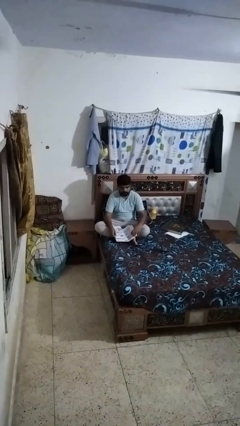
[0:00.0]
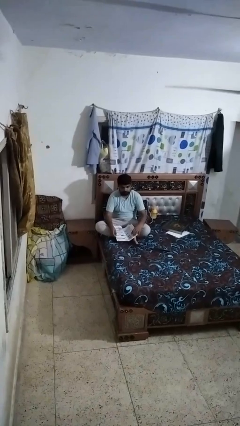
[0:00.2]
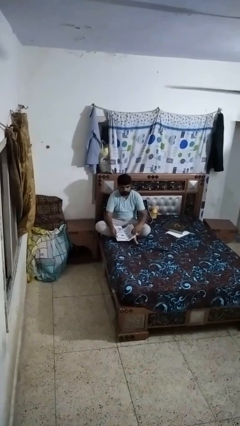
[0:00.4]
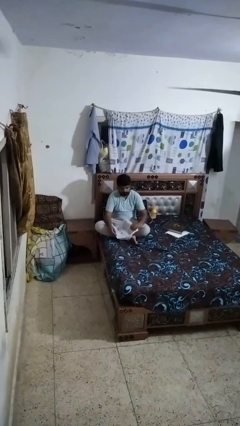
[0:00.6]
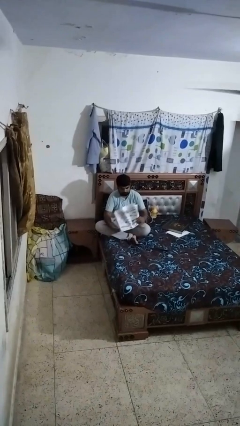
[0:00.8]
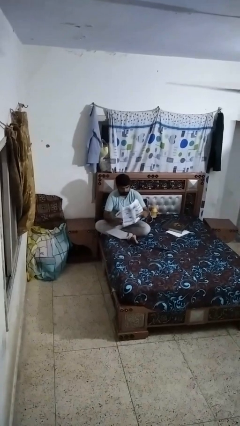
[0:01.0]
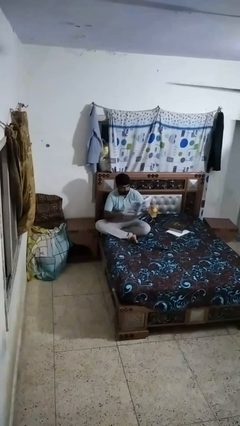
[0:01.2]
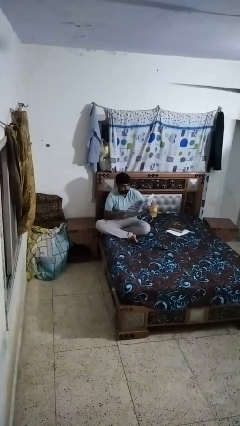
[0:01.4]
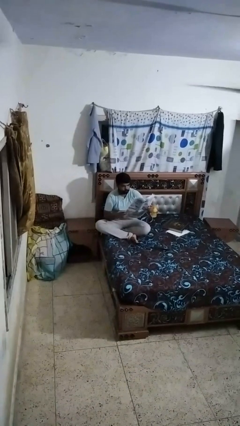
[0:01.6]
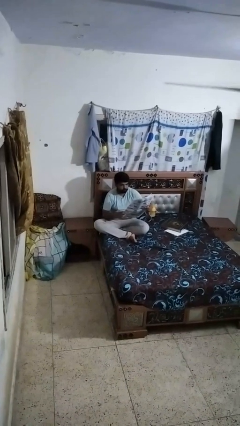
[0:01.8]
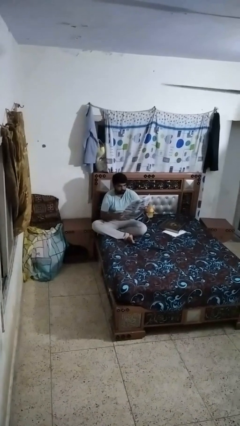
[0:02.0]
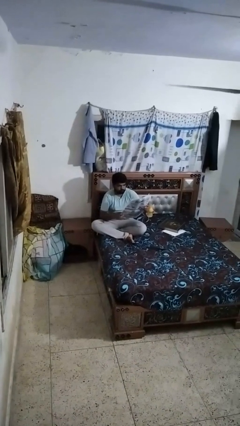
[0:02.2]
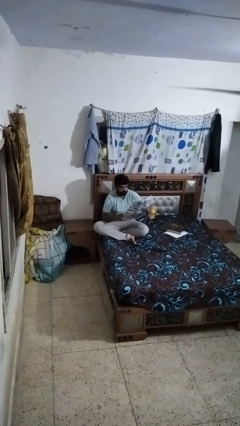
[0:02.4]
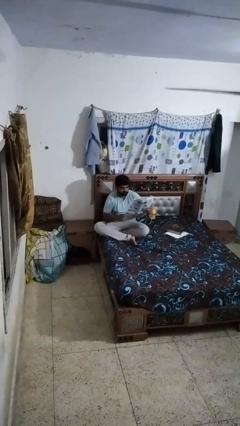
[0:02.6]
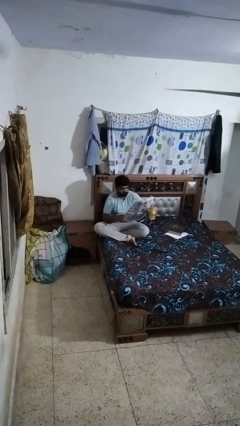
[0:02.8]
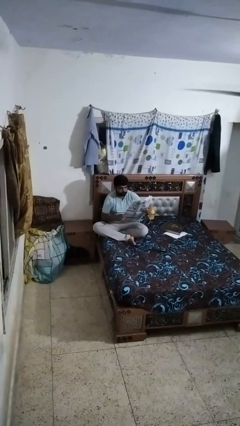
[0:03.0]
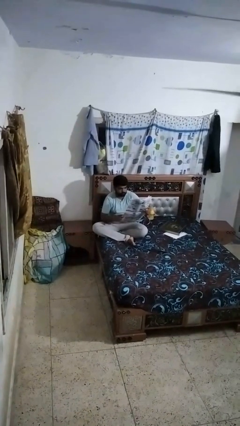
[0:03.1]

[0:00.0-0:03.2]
person reads newspaper

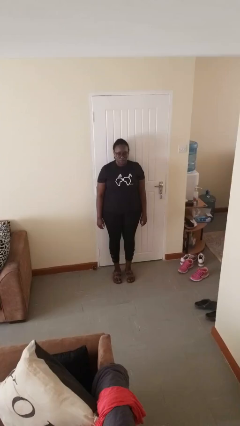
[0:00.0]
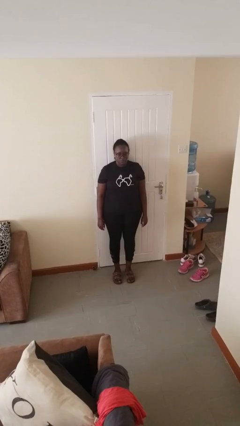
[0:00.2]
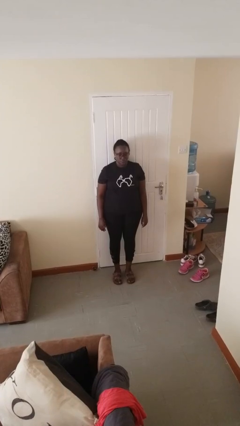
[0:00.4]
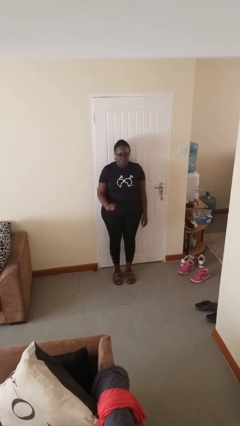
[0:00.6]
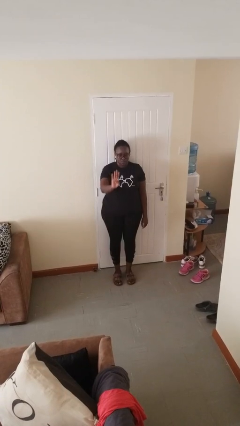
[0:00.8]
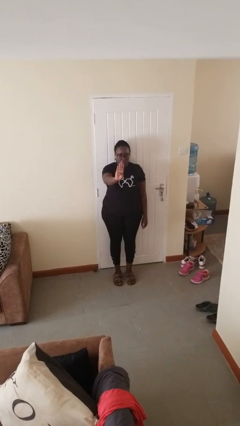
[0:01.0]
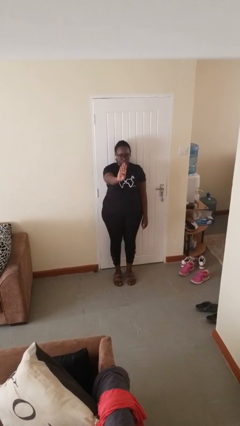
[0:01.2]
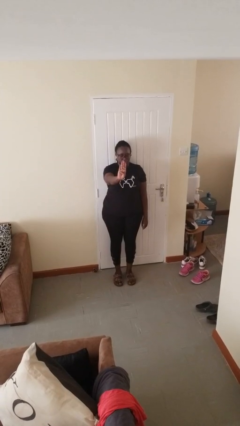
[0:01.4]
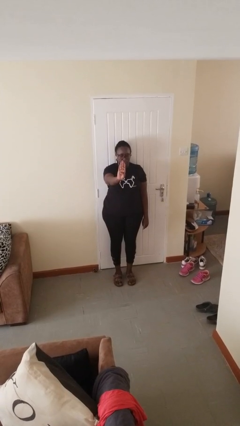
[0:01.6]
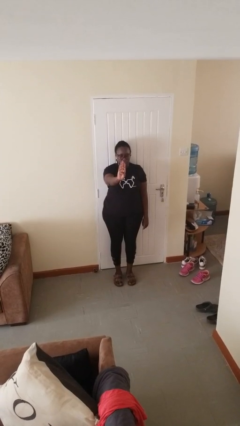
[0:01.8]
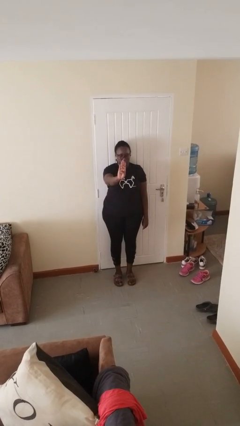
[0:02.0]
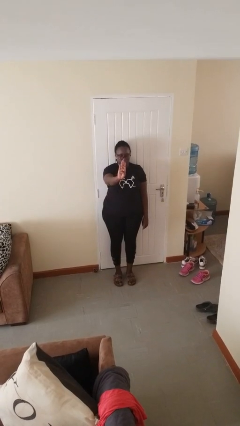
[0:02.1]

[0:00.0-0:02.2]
person gestures number four

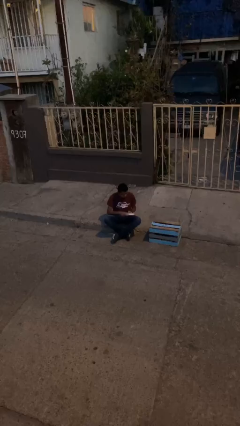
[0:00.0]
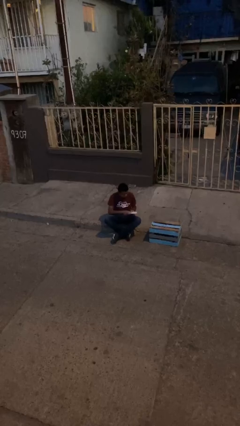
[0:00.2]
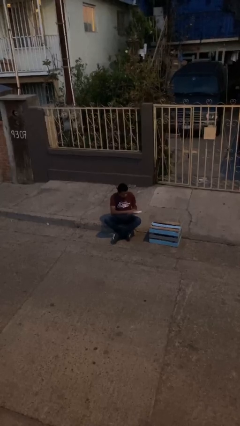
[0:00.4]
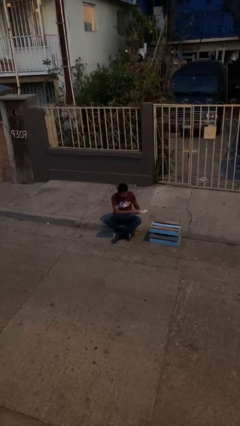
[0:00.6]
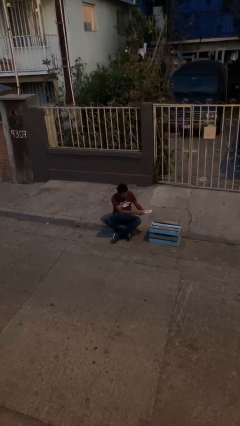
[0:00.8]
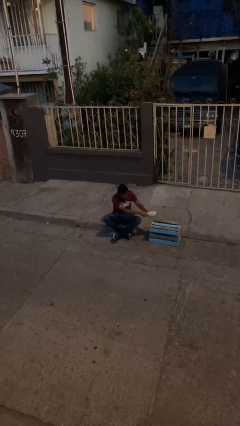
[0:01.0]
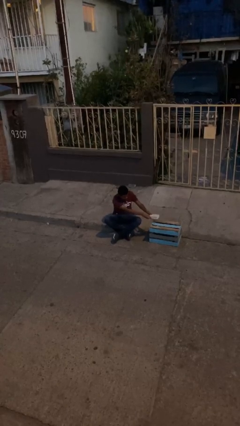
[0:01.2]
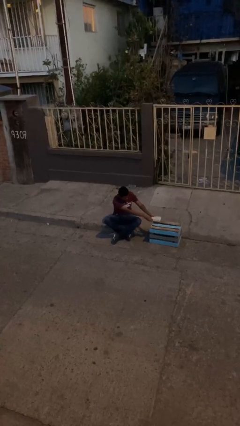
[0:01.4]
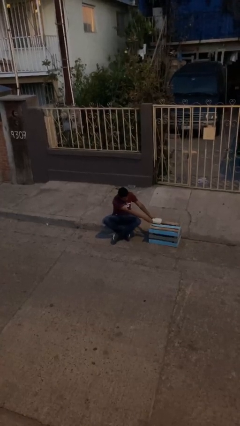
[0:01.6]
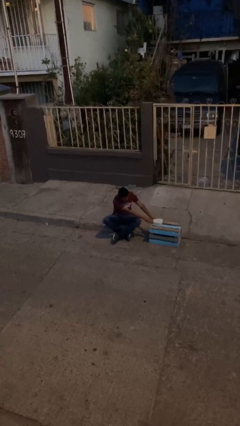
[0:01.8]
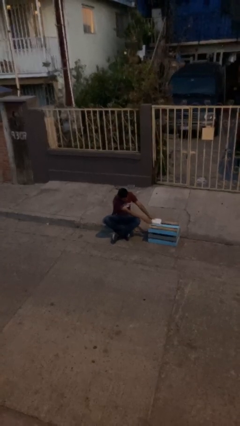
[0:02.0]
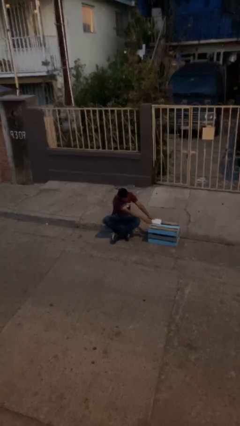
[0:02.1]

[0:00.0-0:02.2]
person puts down object on table

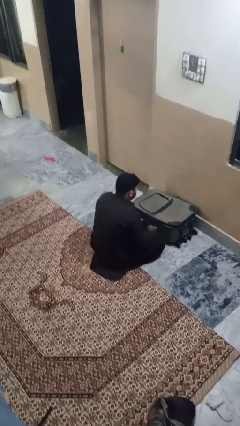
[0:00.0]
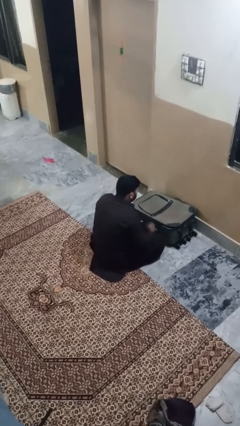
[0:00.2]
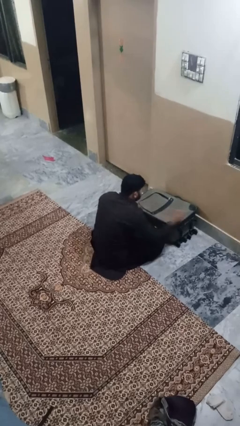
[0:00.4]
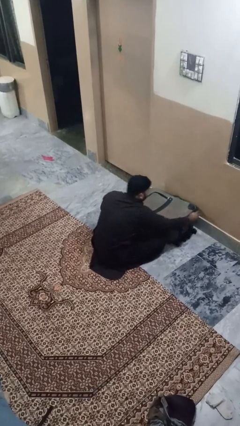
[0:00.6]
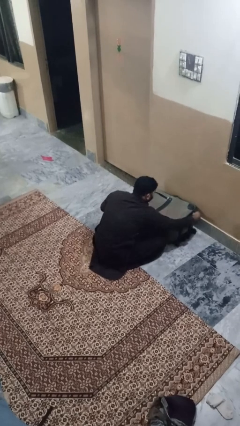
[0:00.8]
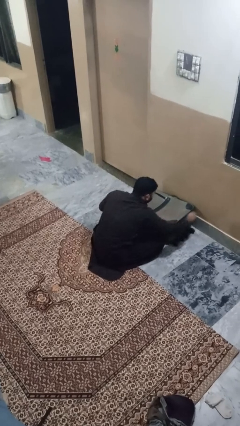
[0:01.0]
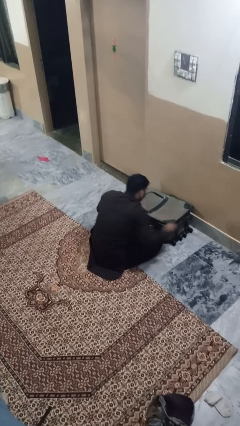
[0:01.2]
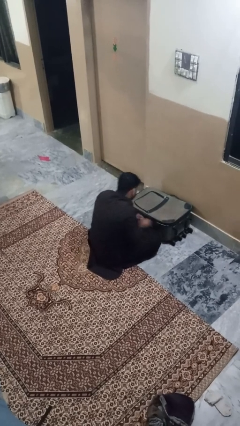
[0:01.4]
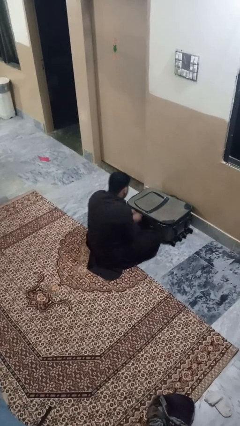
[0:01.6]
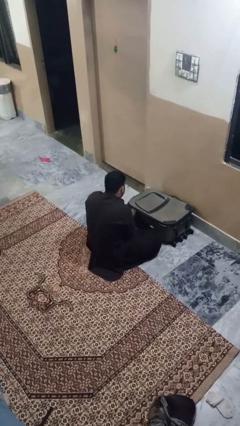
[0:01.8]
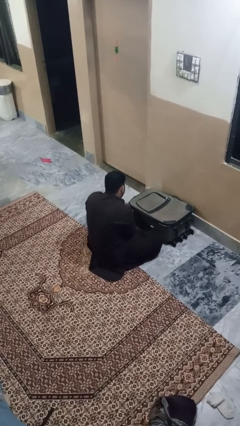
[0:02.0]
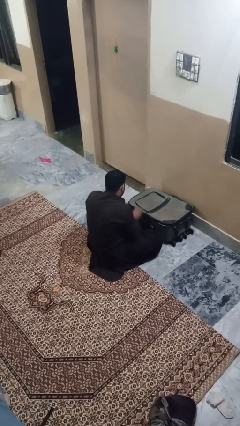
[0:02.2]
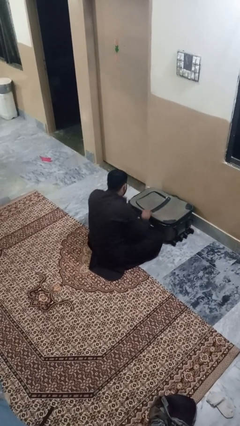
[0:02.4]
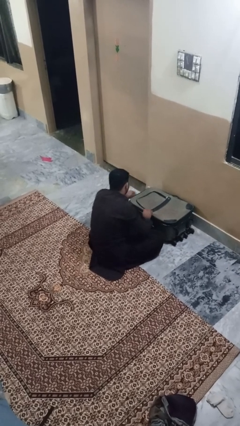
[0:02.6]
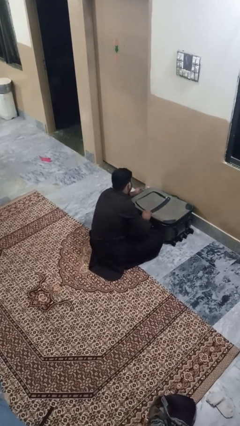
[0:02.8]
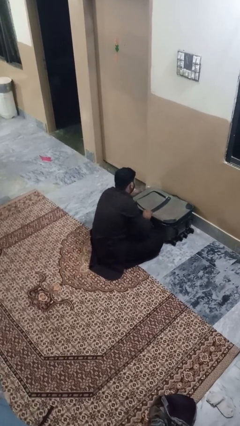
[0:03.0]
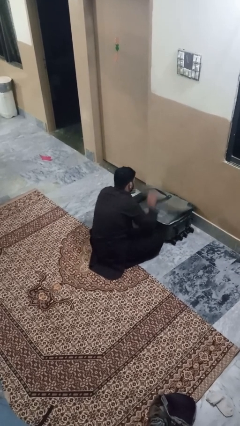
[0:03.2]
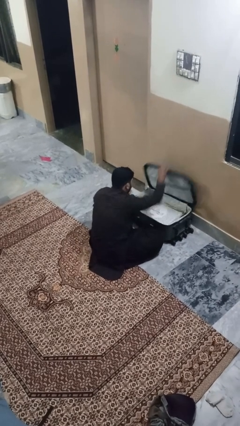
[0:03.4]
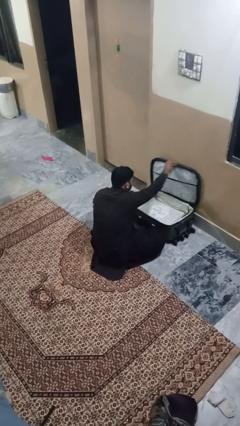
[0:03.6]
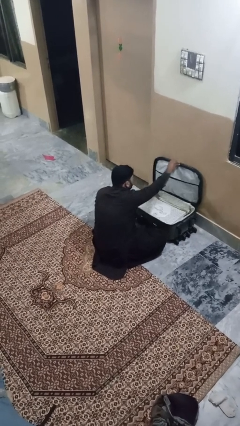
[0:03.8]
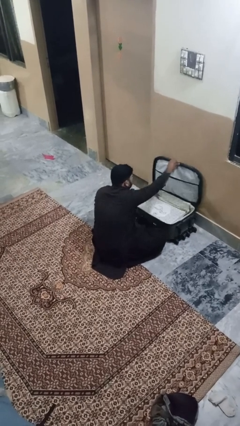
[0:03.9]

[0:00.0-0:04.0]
person opens suitcase

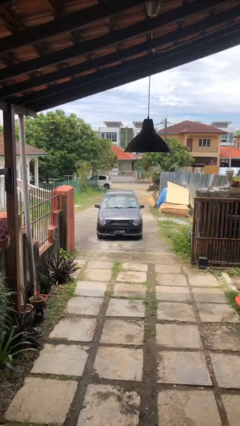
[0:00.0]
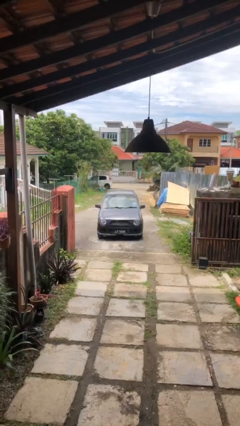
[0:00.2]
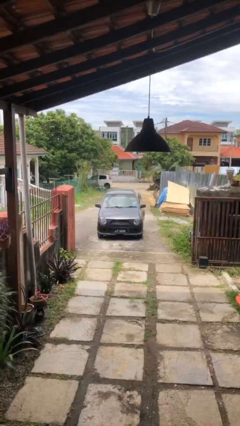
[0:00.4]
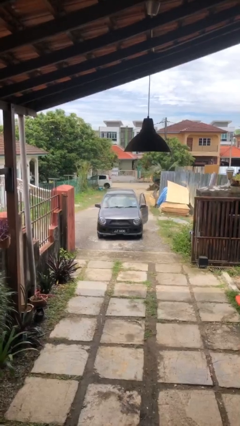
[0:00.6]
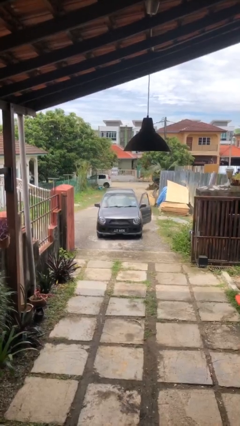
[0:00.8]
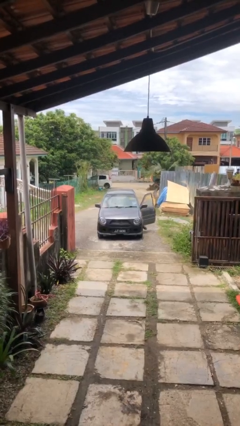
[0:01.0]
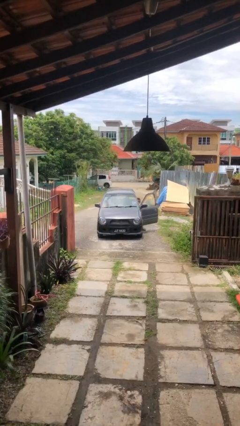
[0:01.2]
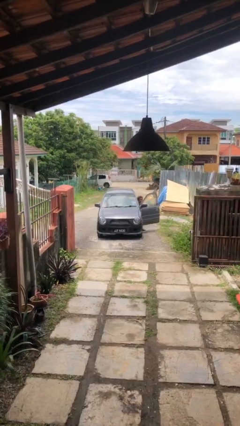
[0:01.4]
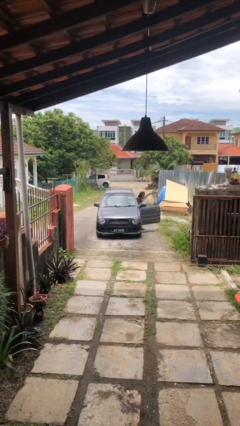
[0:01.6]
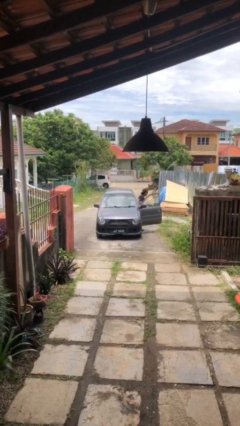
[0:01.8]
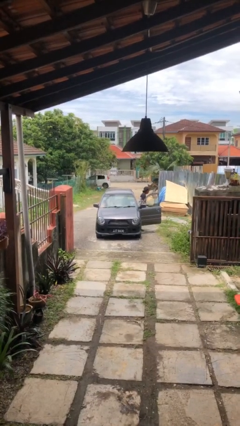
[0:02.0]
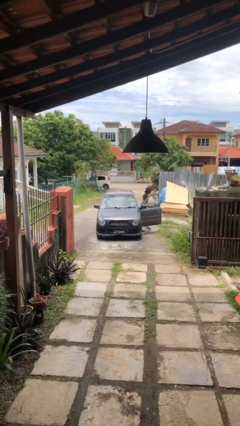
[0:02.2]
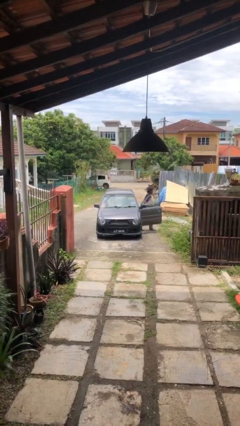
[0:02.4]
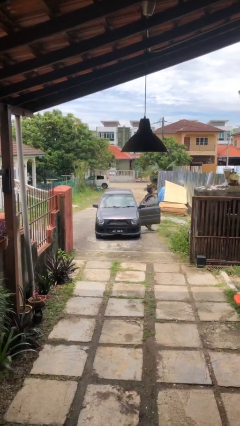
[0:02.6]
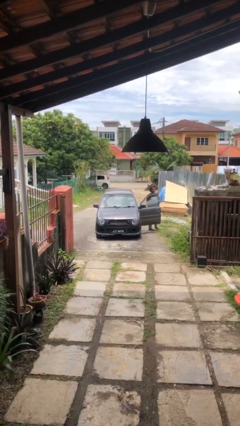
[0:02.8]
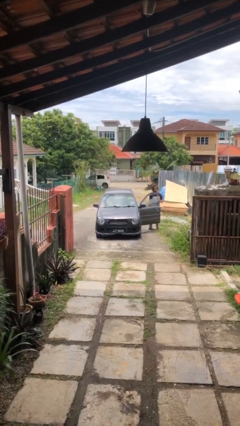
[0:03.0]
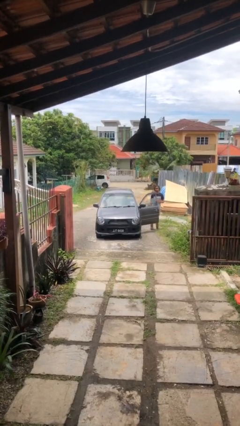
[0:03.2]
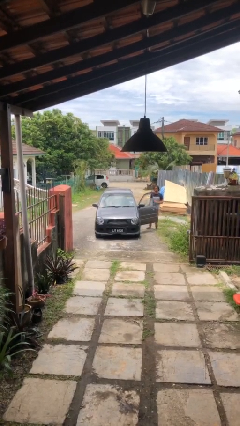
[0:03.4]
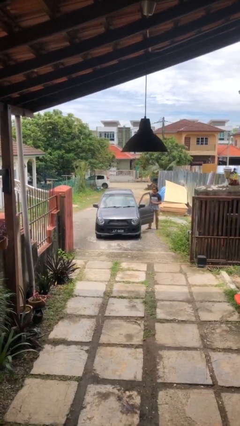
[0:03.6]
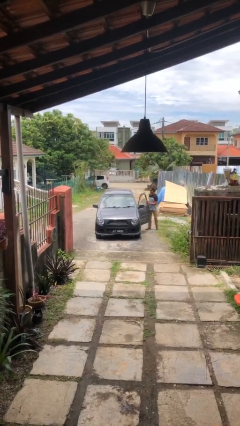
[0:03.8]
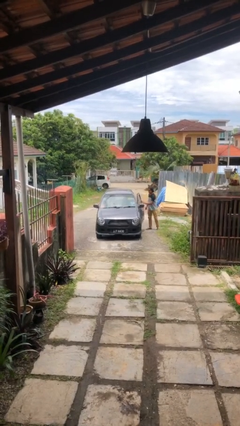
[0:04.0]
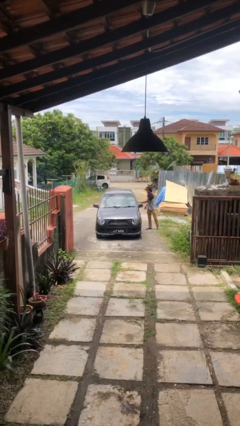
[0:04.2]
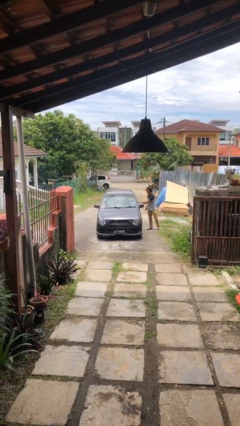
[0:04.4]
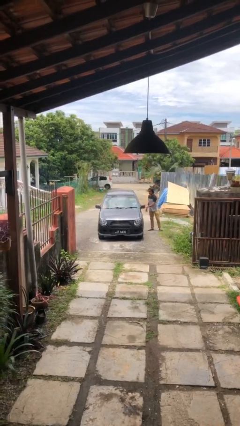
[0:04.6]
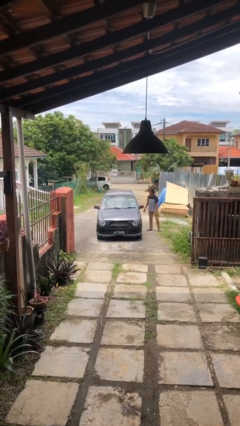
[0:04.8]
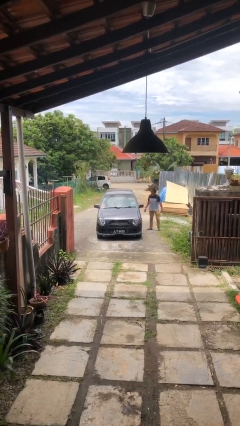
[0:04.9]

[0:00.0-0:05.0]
car drops off person

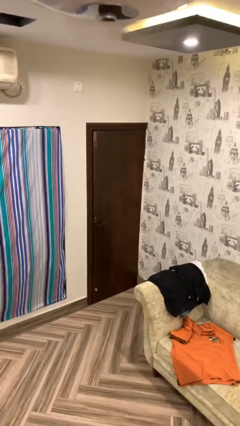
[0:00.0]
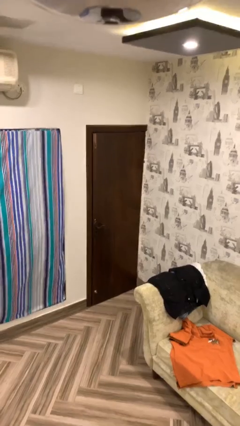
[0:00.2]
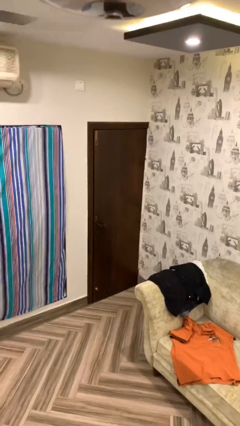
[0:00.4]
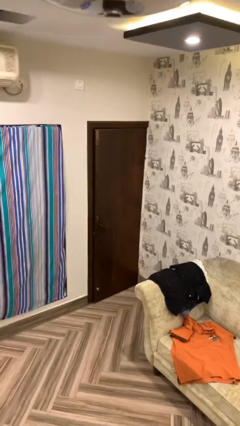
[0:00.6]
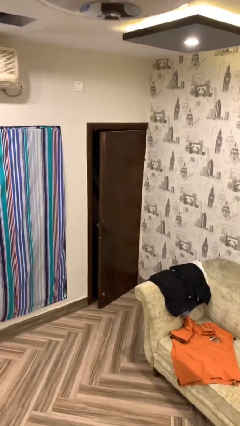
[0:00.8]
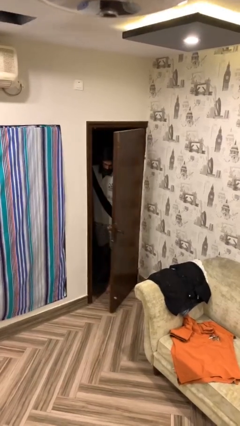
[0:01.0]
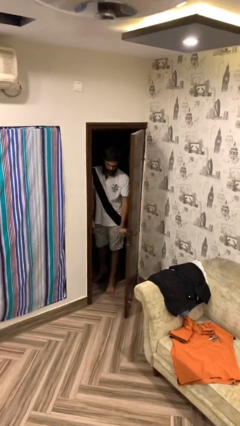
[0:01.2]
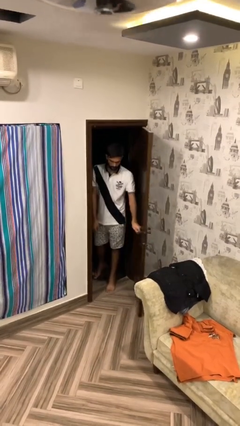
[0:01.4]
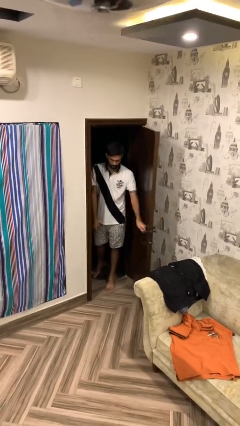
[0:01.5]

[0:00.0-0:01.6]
person opens facility door
